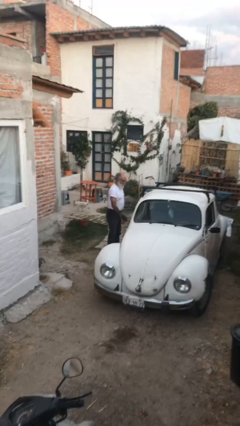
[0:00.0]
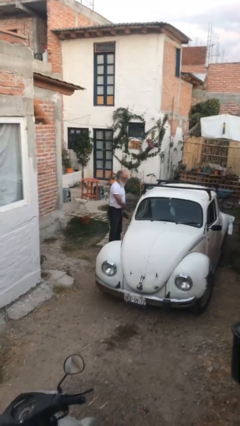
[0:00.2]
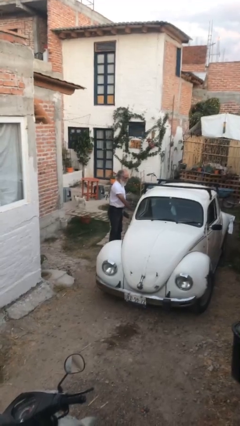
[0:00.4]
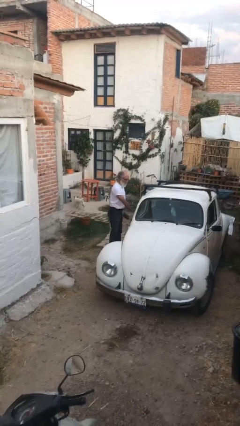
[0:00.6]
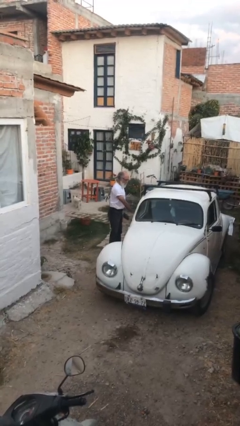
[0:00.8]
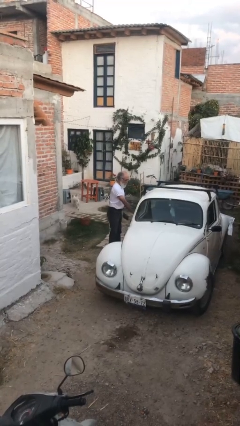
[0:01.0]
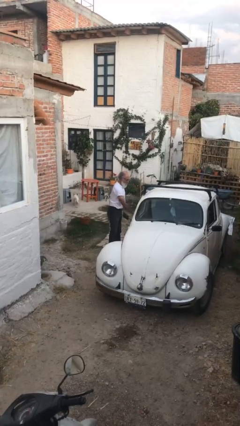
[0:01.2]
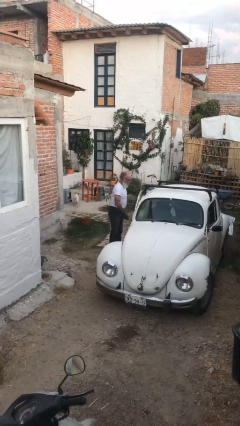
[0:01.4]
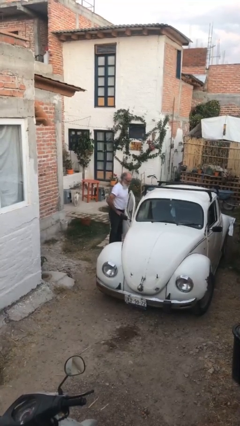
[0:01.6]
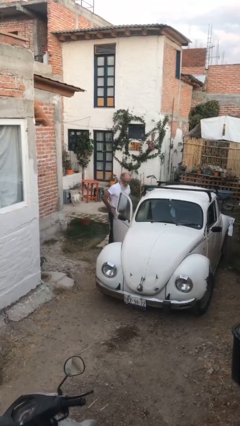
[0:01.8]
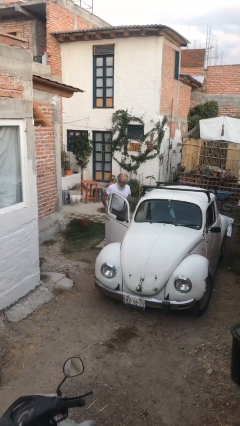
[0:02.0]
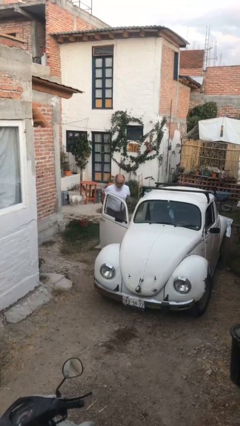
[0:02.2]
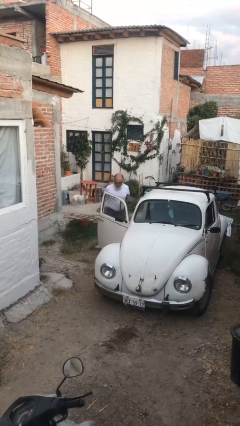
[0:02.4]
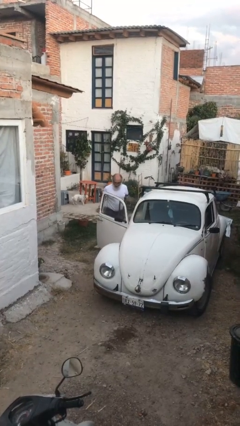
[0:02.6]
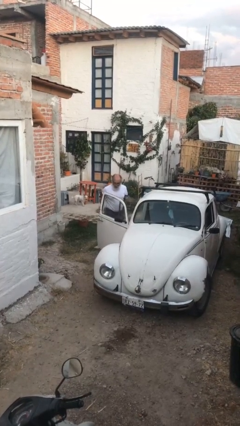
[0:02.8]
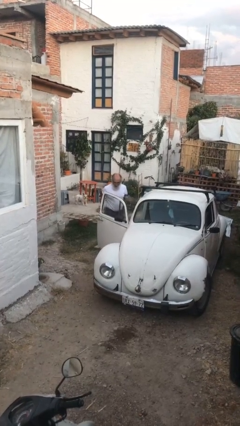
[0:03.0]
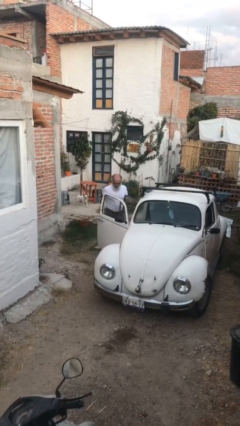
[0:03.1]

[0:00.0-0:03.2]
person opens car door

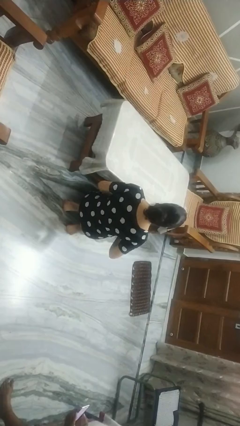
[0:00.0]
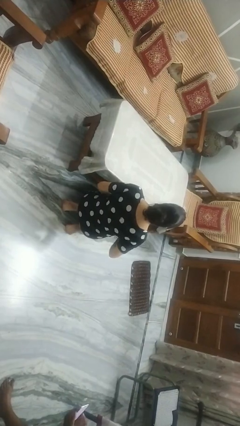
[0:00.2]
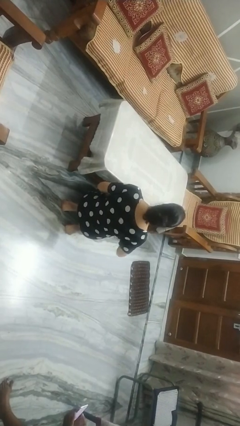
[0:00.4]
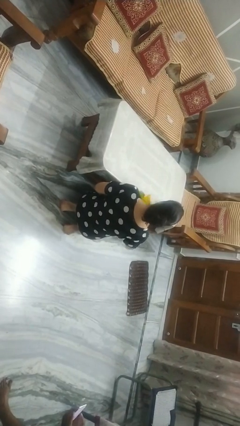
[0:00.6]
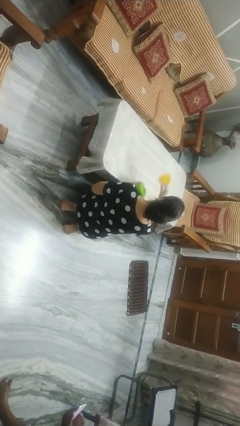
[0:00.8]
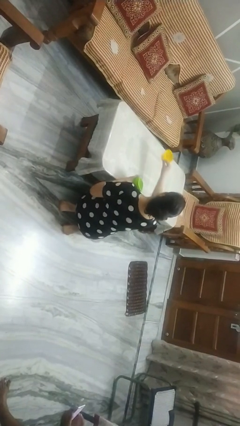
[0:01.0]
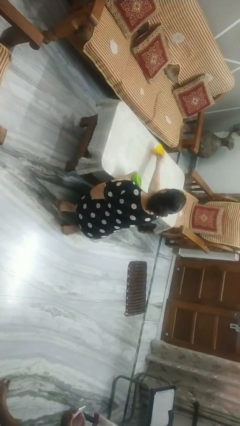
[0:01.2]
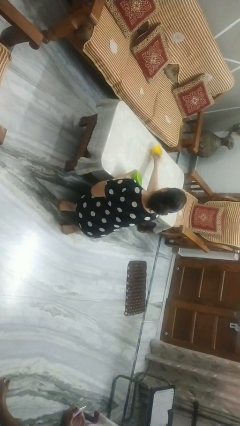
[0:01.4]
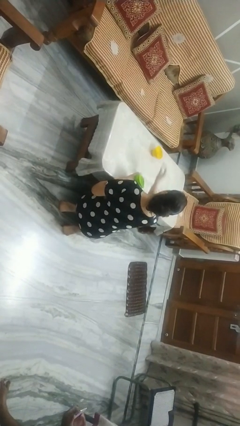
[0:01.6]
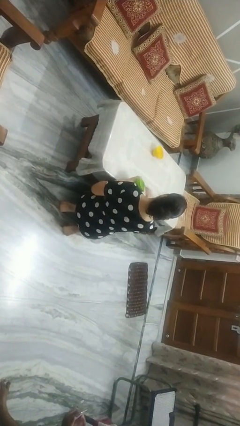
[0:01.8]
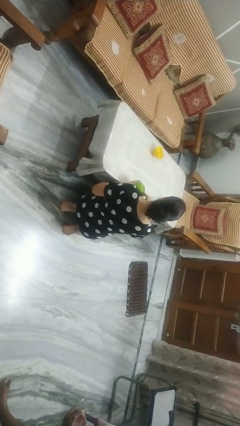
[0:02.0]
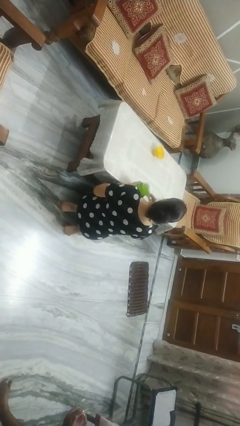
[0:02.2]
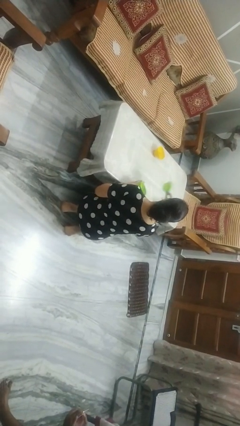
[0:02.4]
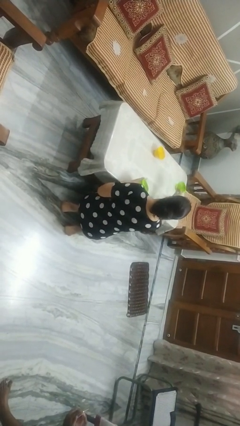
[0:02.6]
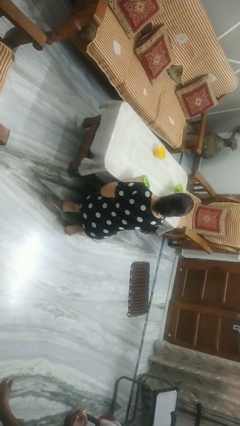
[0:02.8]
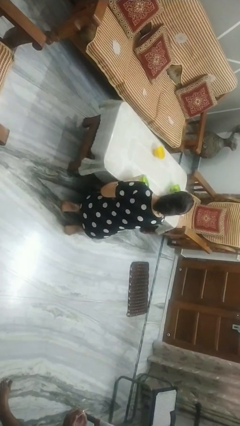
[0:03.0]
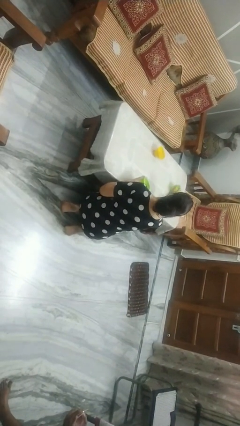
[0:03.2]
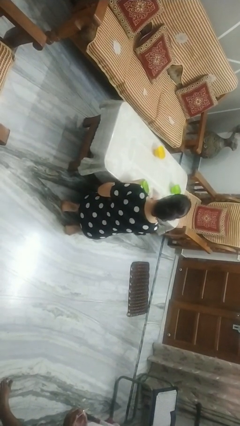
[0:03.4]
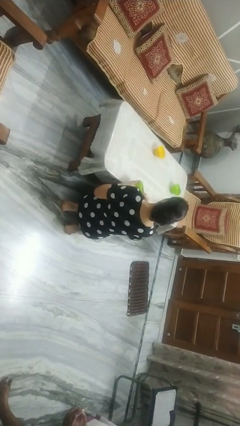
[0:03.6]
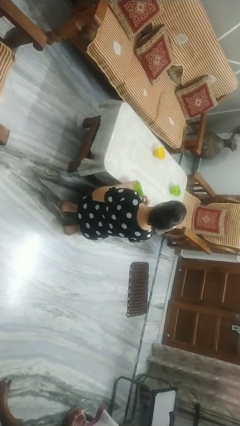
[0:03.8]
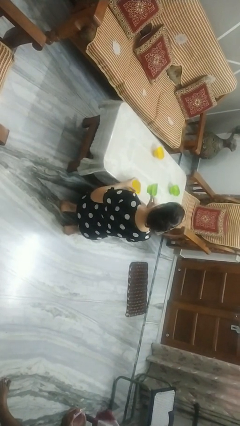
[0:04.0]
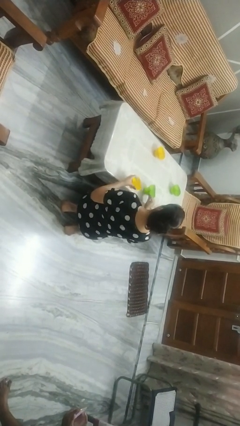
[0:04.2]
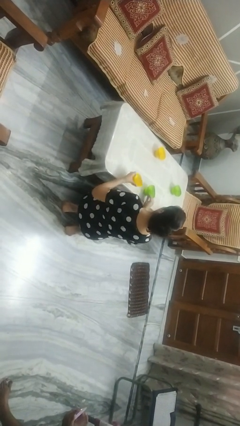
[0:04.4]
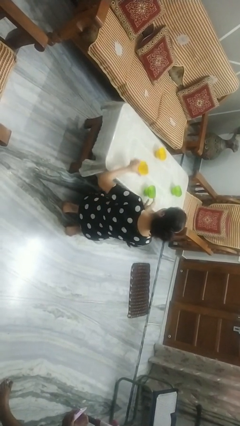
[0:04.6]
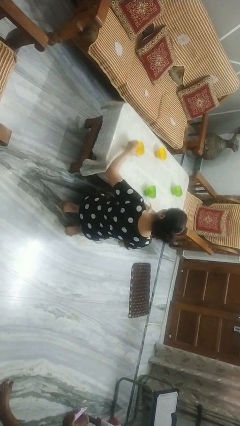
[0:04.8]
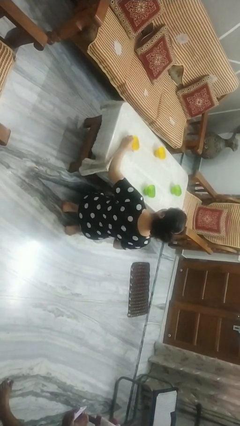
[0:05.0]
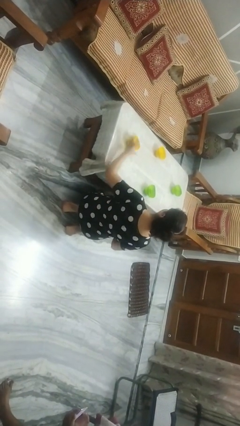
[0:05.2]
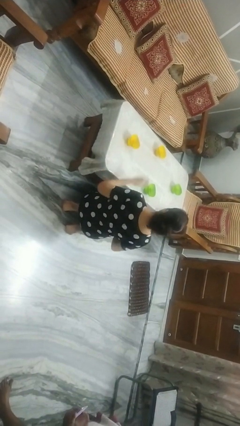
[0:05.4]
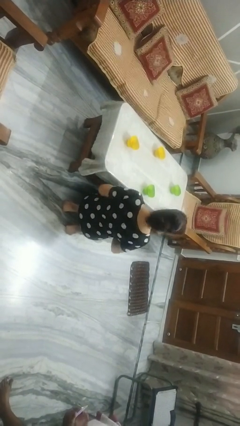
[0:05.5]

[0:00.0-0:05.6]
person sets table

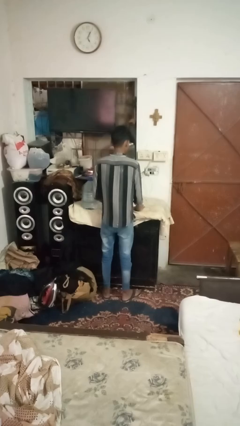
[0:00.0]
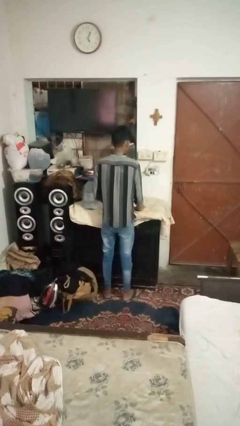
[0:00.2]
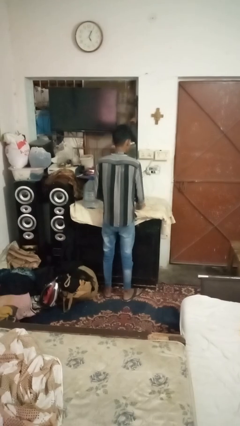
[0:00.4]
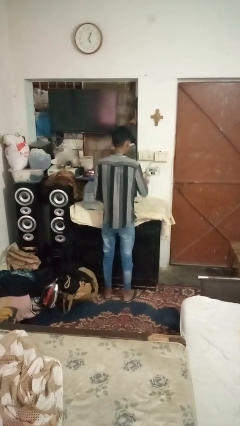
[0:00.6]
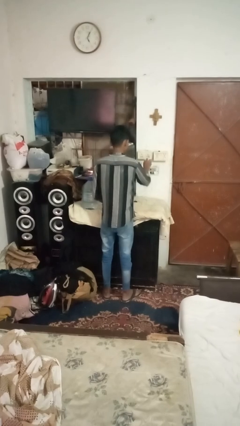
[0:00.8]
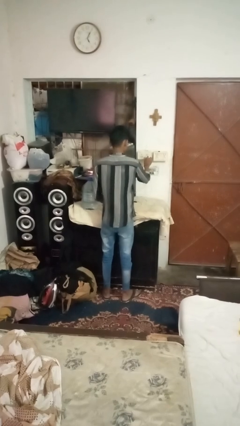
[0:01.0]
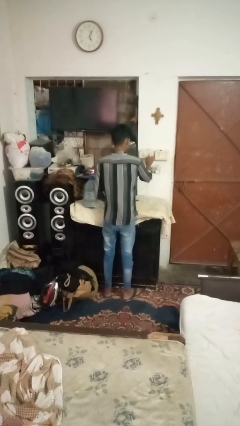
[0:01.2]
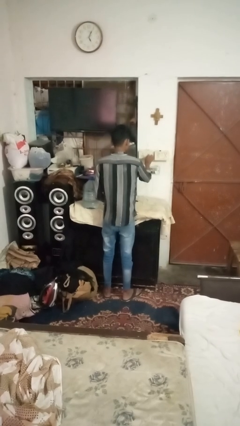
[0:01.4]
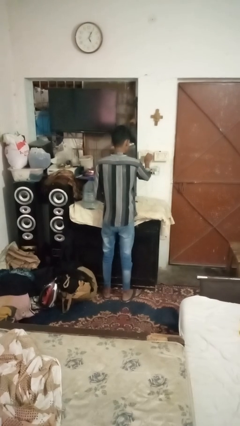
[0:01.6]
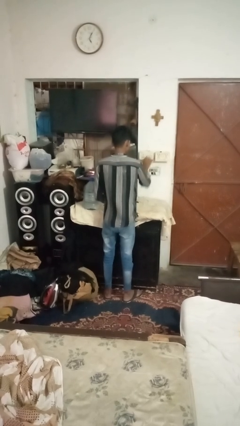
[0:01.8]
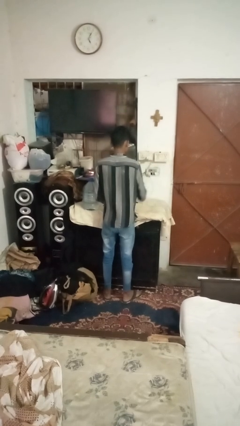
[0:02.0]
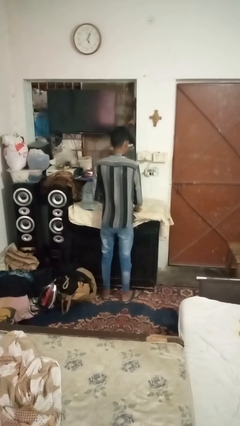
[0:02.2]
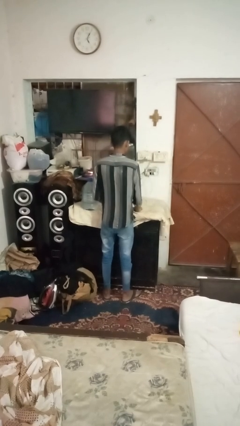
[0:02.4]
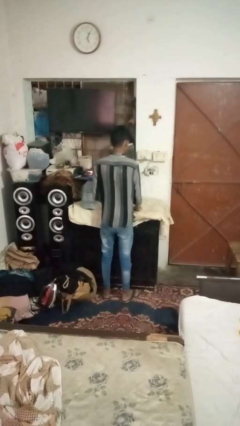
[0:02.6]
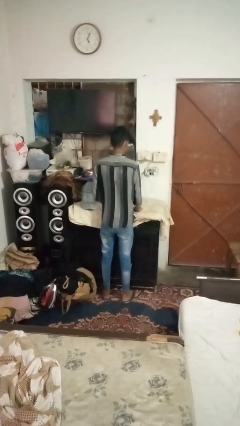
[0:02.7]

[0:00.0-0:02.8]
person plugs into electrical socket

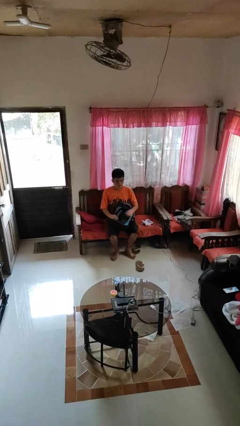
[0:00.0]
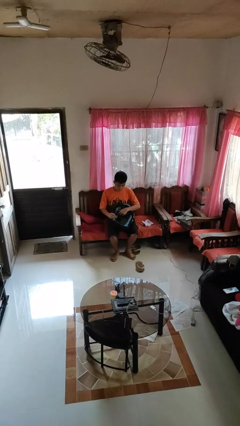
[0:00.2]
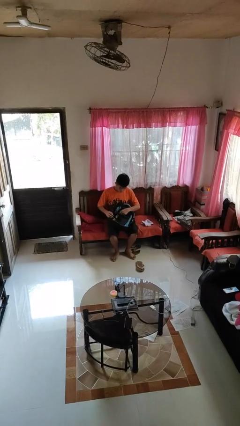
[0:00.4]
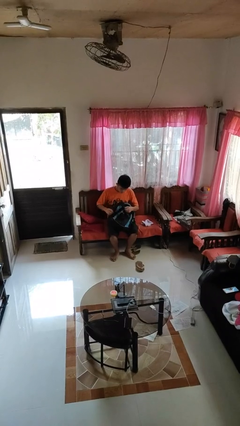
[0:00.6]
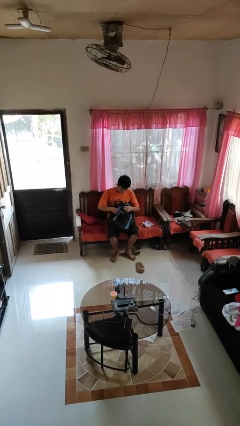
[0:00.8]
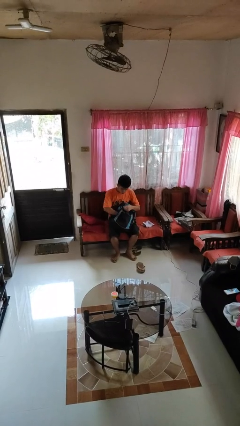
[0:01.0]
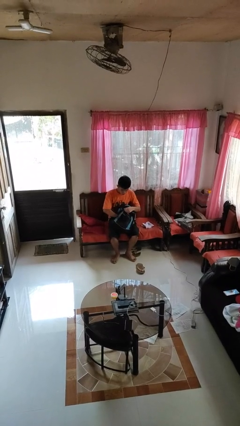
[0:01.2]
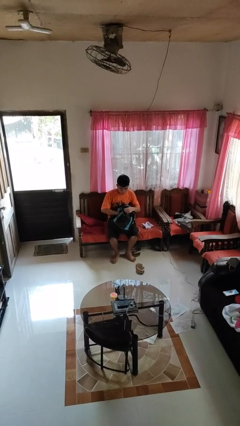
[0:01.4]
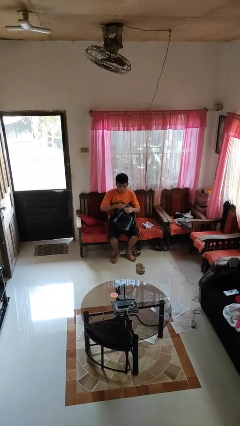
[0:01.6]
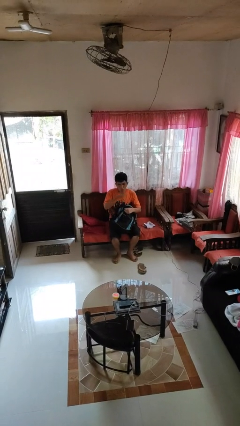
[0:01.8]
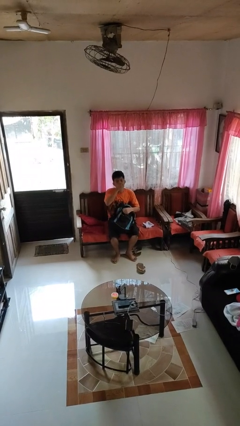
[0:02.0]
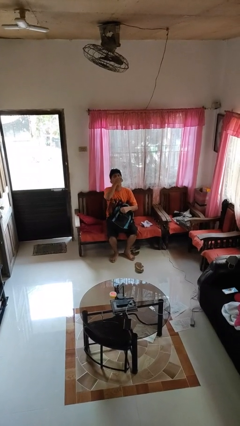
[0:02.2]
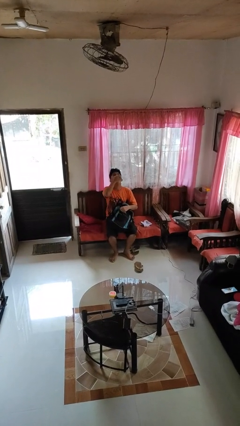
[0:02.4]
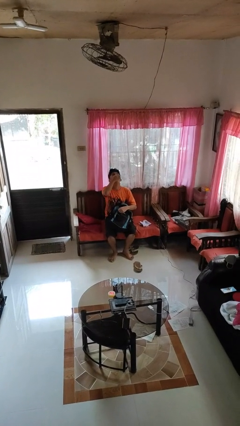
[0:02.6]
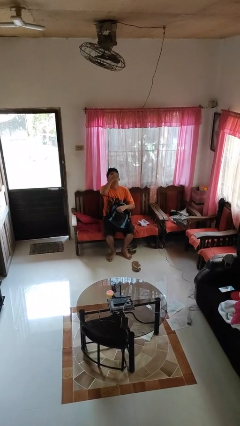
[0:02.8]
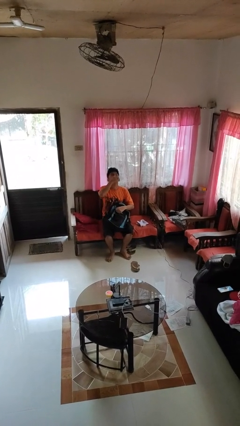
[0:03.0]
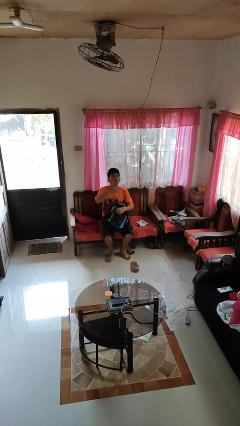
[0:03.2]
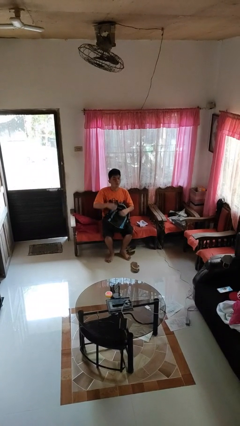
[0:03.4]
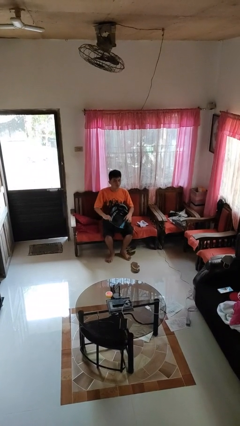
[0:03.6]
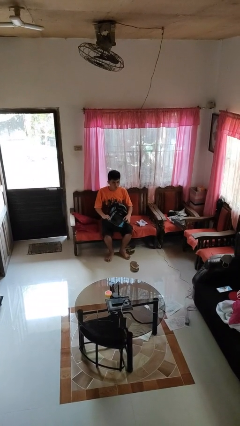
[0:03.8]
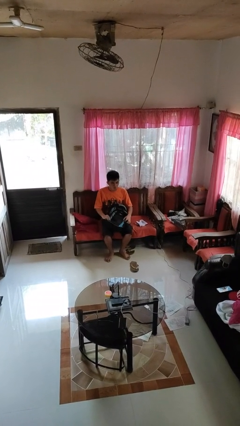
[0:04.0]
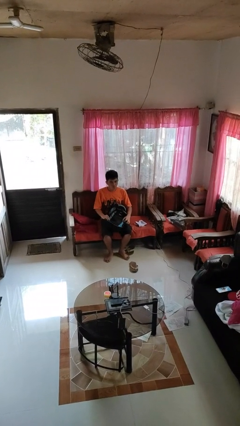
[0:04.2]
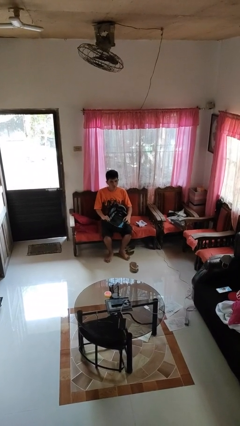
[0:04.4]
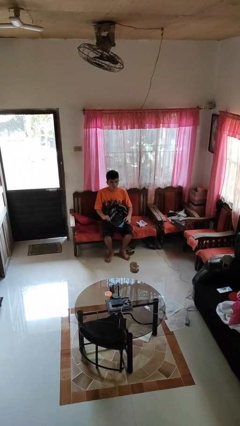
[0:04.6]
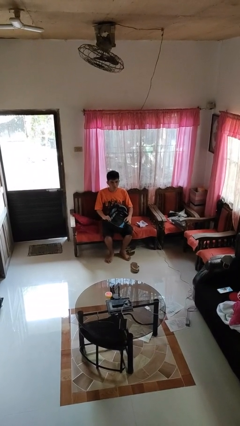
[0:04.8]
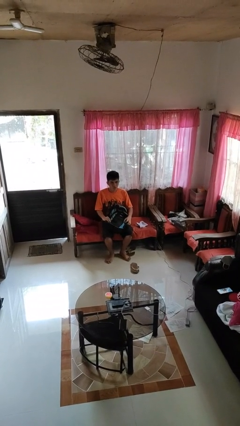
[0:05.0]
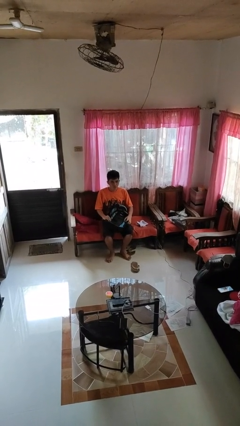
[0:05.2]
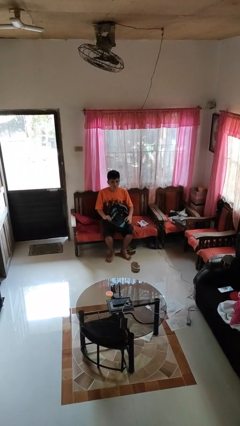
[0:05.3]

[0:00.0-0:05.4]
person eats snack from bag

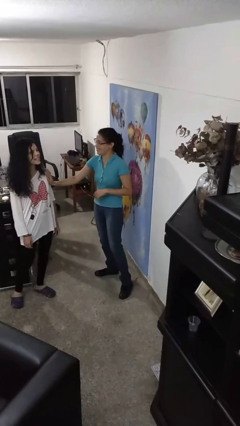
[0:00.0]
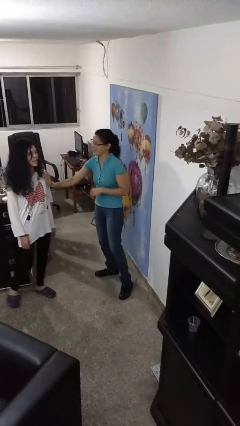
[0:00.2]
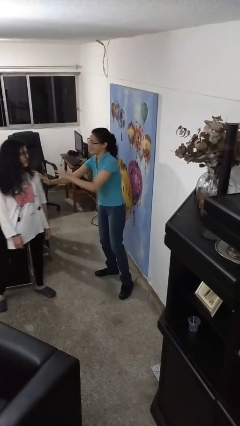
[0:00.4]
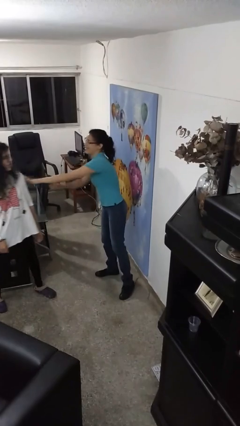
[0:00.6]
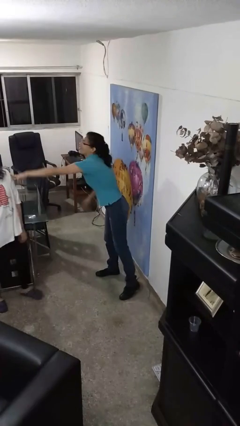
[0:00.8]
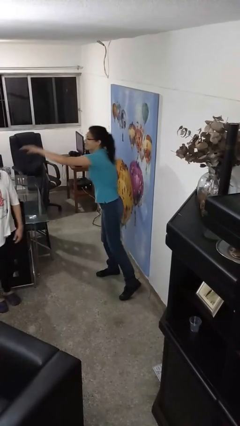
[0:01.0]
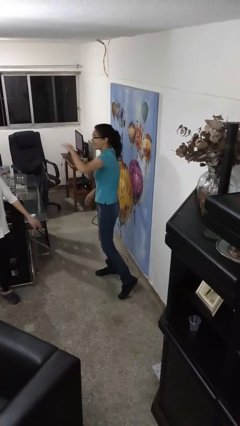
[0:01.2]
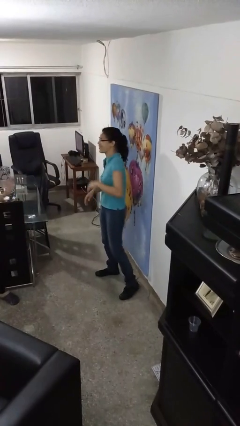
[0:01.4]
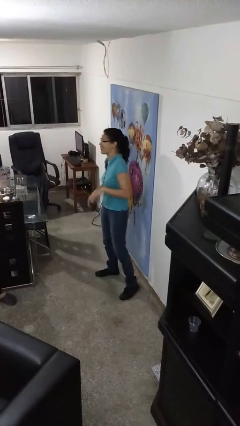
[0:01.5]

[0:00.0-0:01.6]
person shoves person
